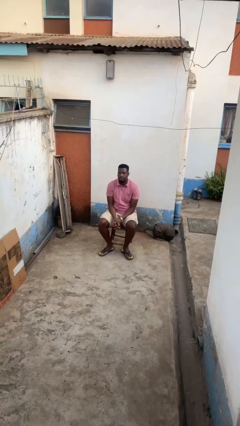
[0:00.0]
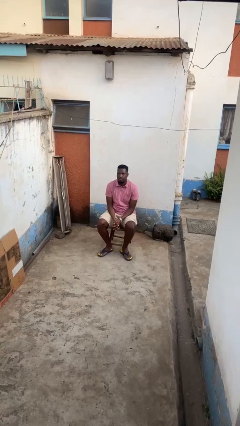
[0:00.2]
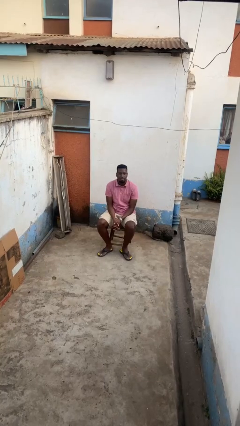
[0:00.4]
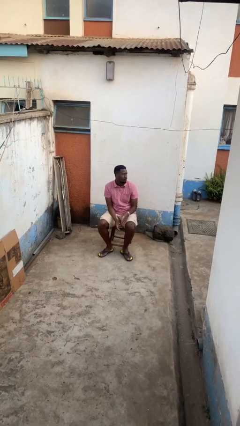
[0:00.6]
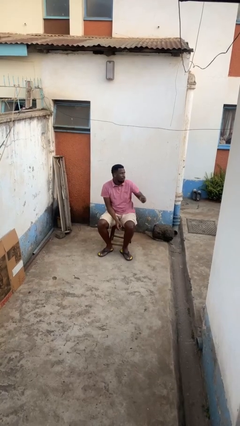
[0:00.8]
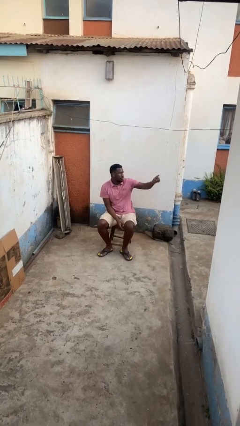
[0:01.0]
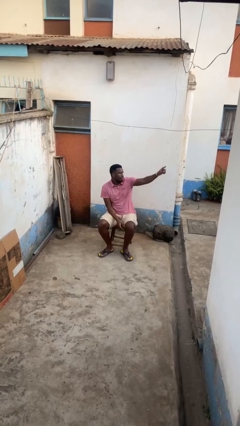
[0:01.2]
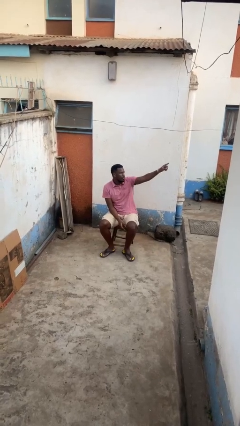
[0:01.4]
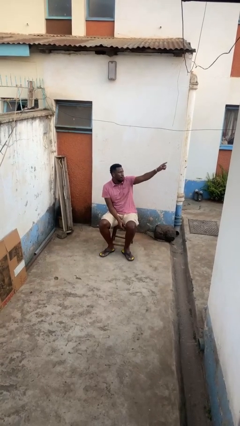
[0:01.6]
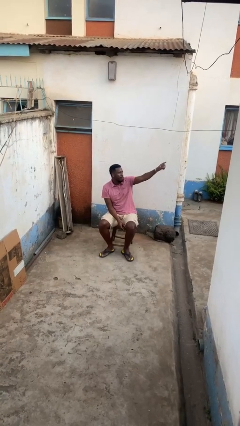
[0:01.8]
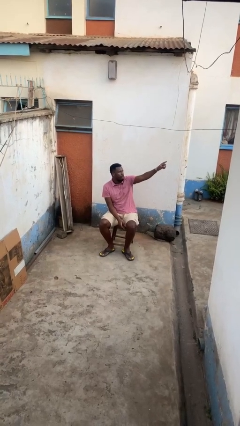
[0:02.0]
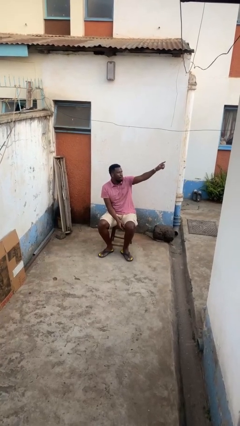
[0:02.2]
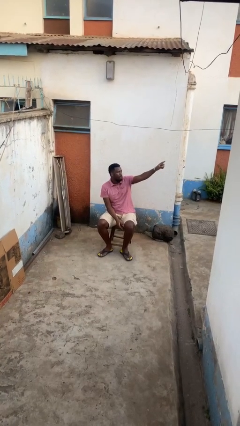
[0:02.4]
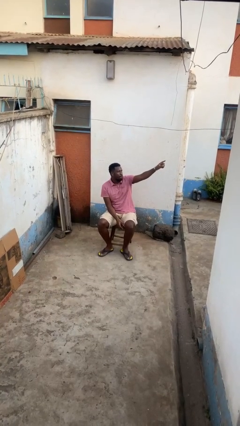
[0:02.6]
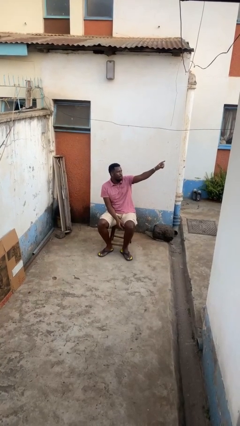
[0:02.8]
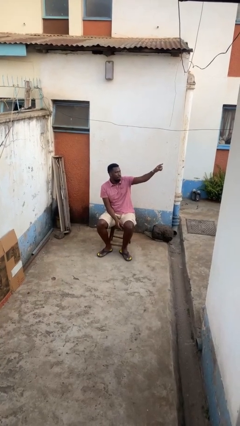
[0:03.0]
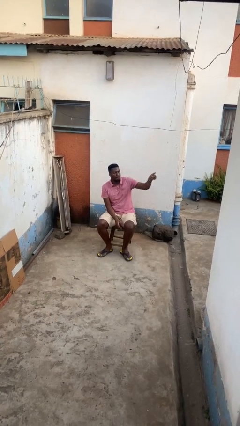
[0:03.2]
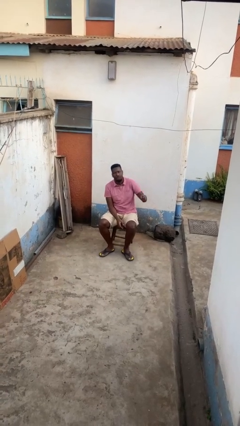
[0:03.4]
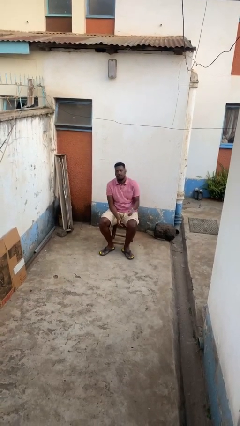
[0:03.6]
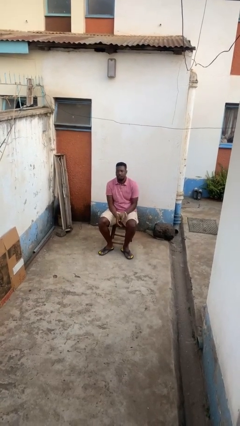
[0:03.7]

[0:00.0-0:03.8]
person points at person

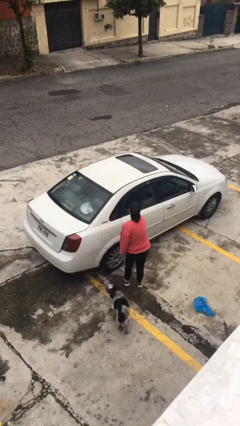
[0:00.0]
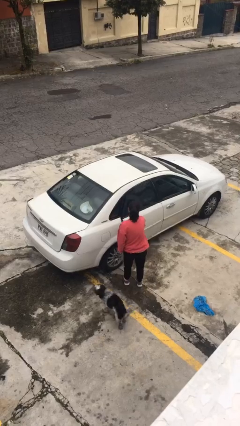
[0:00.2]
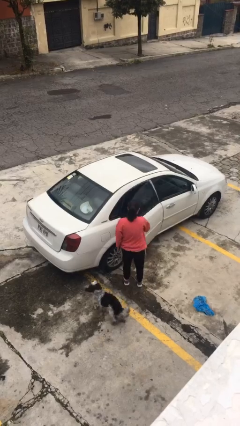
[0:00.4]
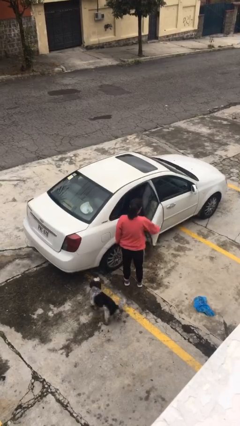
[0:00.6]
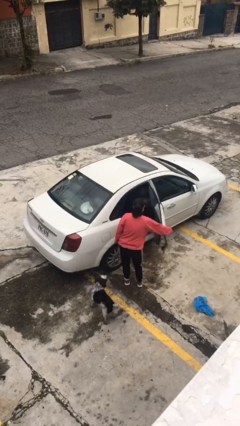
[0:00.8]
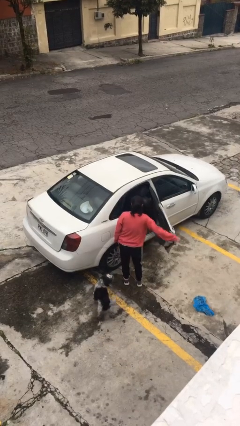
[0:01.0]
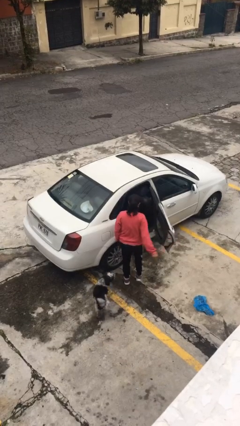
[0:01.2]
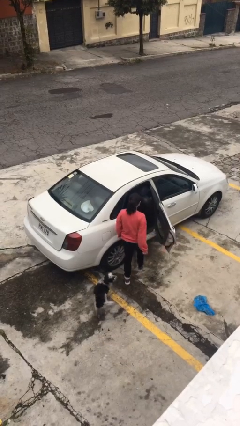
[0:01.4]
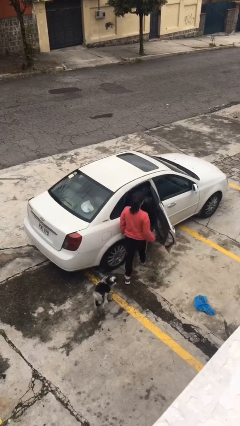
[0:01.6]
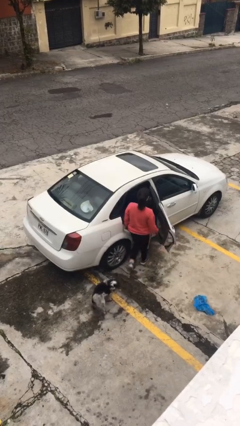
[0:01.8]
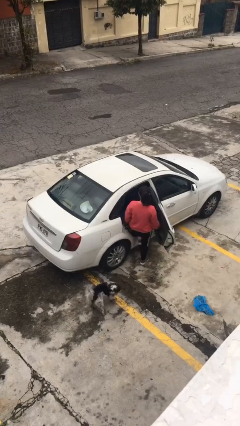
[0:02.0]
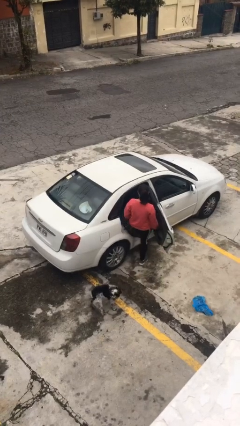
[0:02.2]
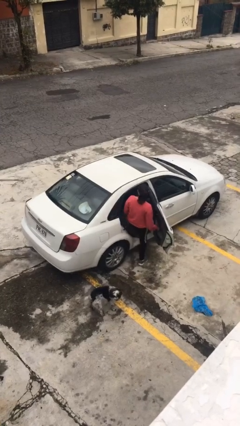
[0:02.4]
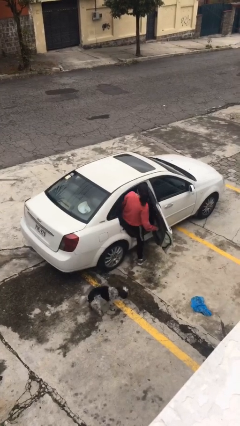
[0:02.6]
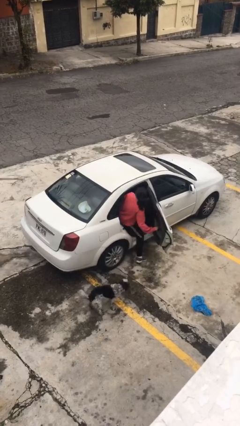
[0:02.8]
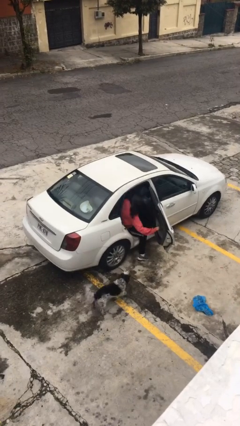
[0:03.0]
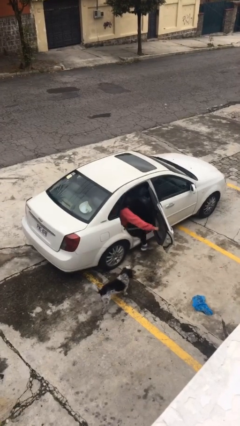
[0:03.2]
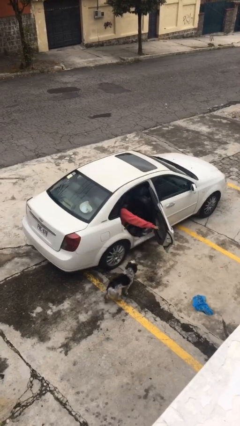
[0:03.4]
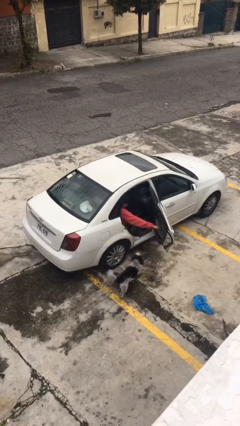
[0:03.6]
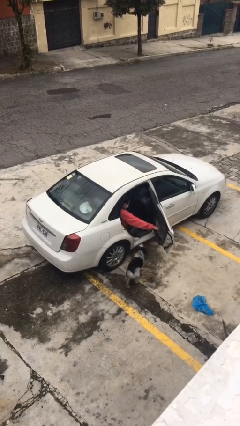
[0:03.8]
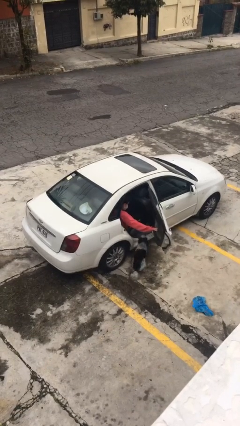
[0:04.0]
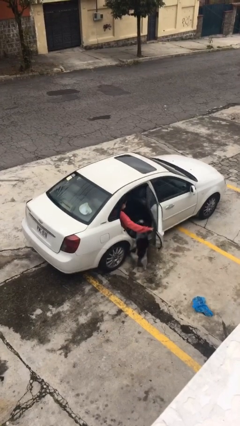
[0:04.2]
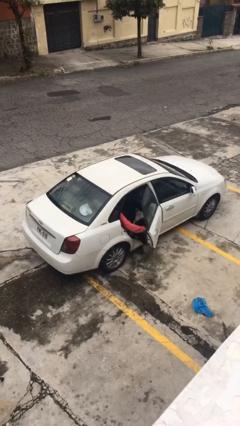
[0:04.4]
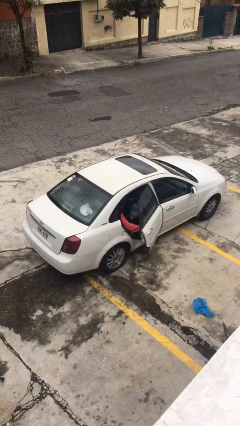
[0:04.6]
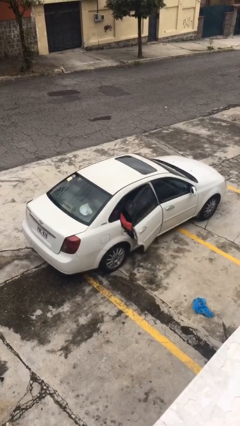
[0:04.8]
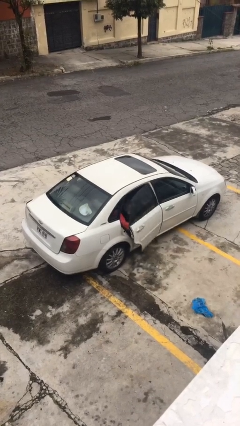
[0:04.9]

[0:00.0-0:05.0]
car picks up person

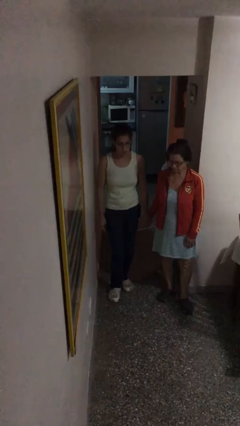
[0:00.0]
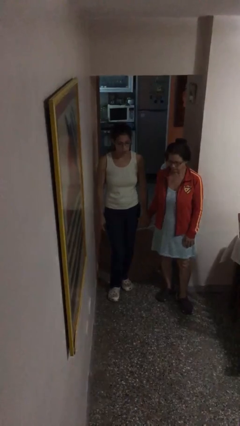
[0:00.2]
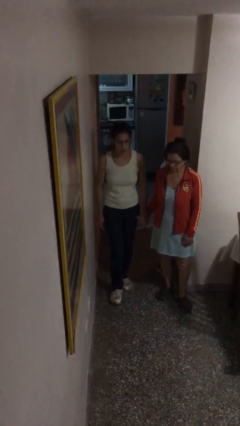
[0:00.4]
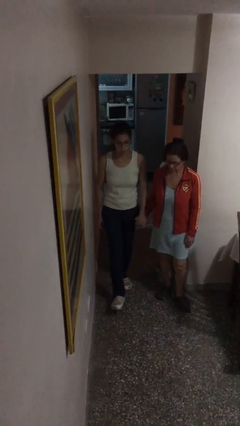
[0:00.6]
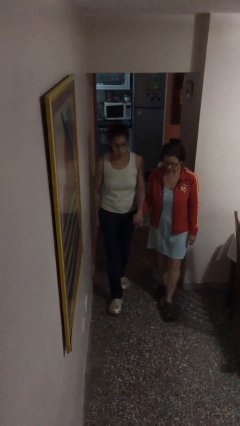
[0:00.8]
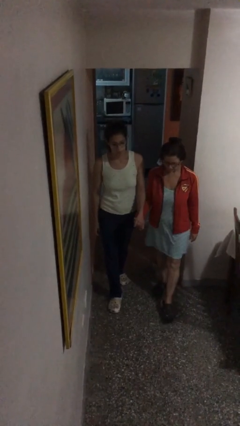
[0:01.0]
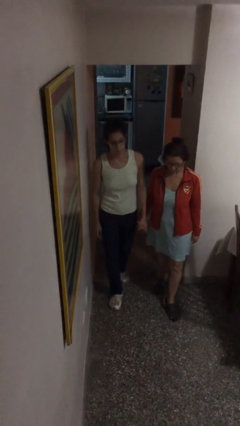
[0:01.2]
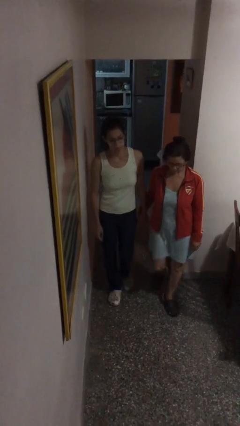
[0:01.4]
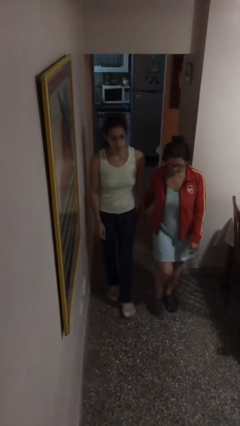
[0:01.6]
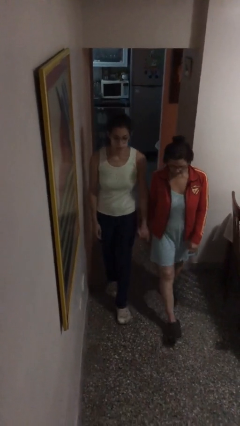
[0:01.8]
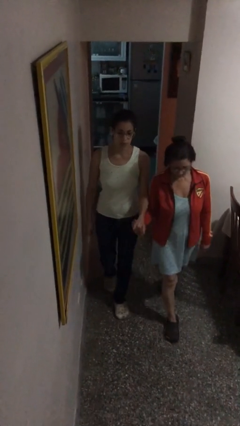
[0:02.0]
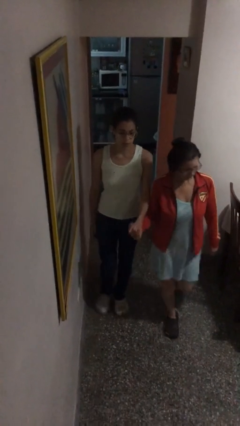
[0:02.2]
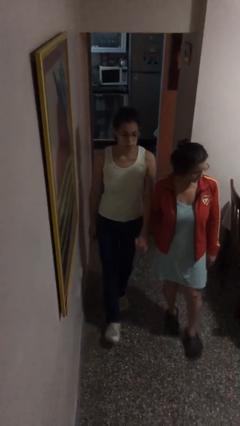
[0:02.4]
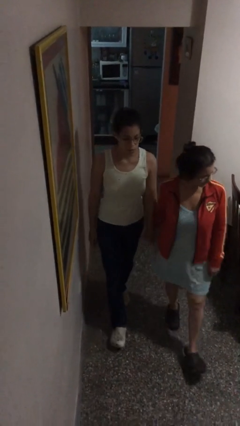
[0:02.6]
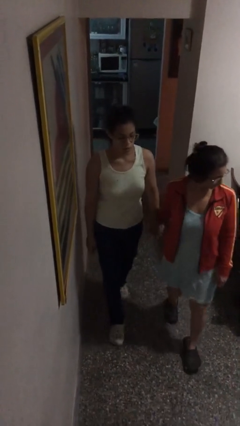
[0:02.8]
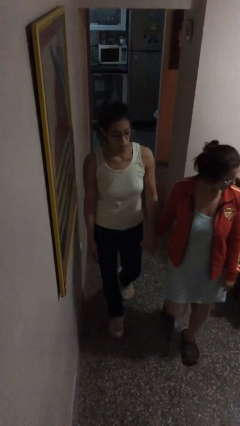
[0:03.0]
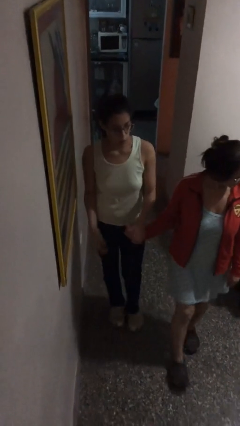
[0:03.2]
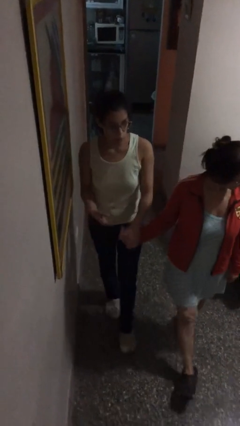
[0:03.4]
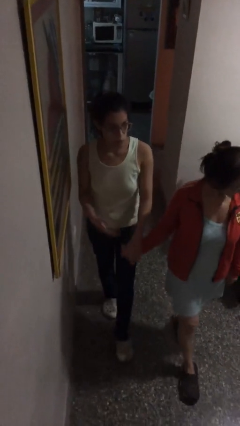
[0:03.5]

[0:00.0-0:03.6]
person holds hand

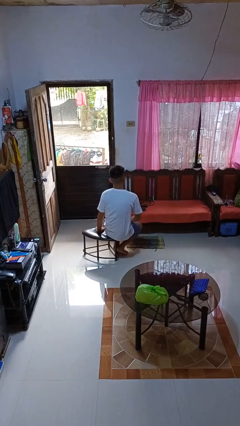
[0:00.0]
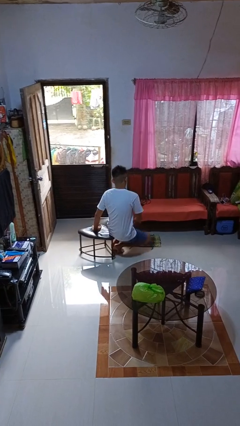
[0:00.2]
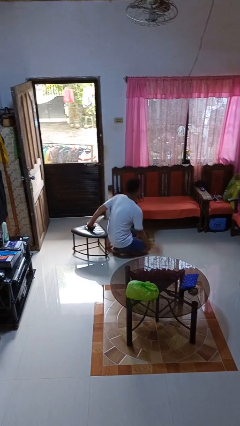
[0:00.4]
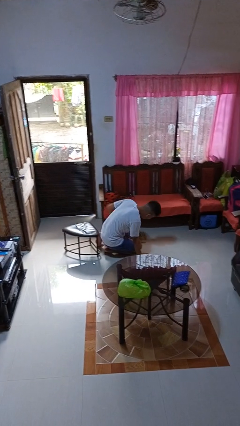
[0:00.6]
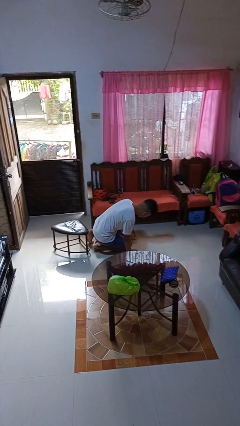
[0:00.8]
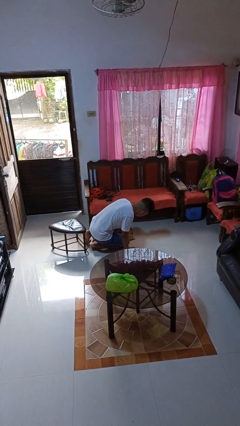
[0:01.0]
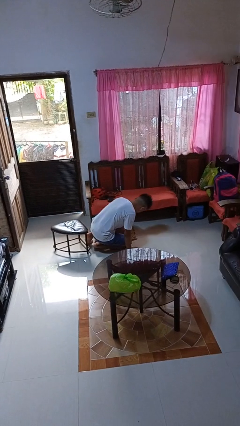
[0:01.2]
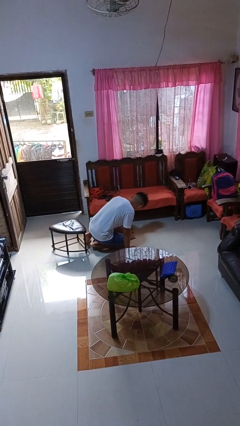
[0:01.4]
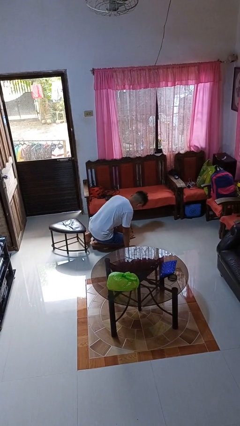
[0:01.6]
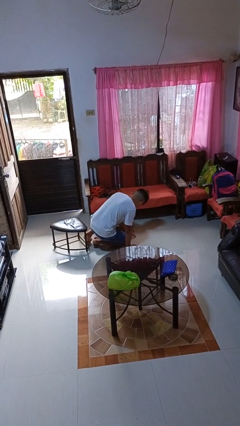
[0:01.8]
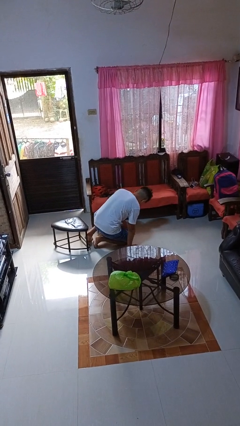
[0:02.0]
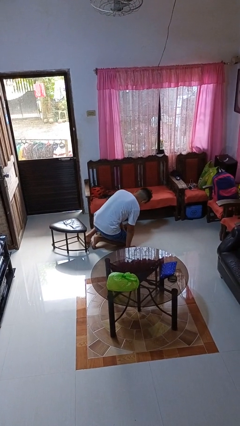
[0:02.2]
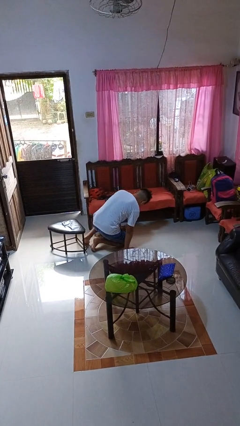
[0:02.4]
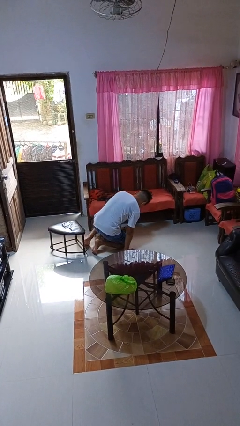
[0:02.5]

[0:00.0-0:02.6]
person falls from chair

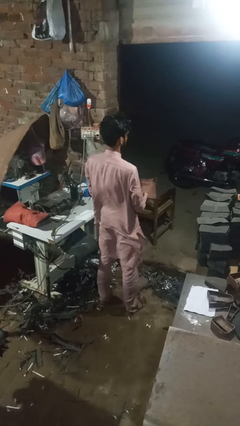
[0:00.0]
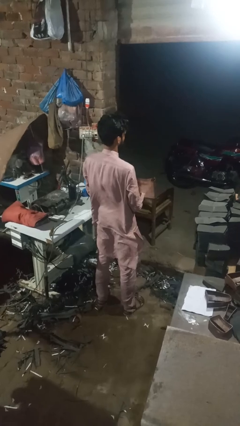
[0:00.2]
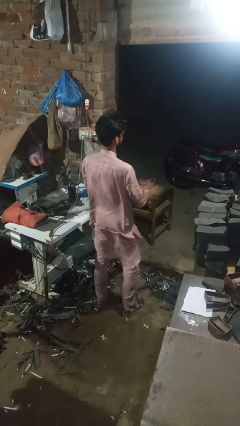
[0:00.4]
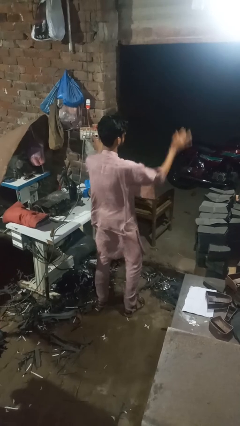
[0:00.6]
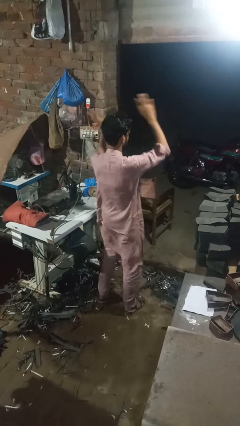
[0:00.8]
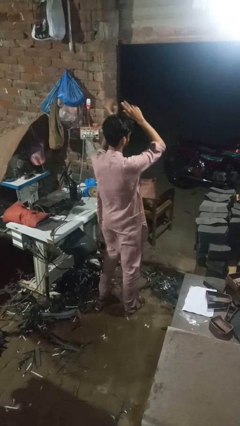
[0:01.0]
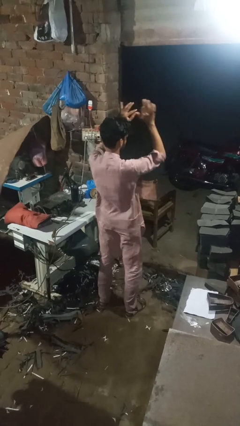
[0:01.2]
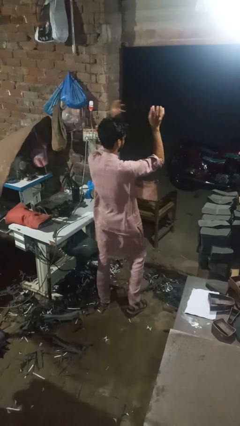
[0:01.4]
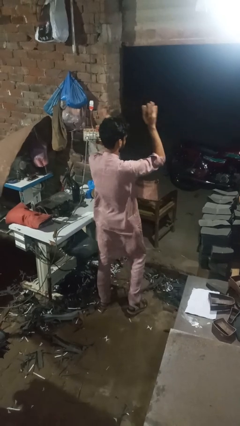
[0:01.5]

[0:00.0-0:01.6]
person dances in place

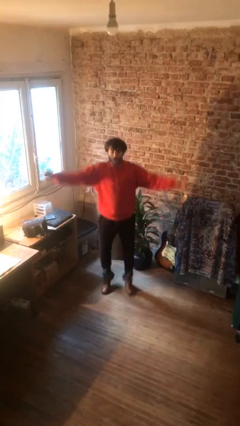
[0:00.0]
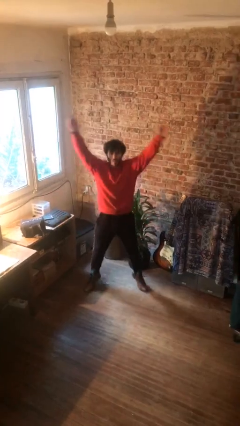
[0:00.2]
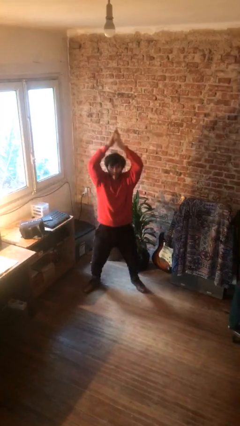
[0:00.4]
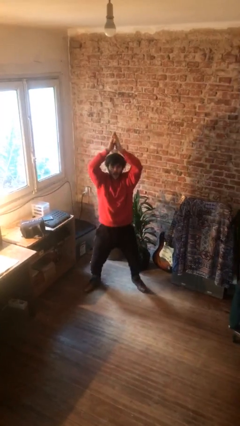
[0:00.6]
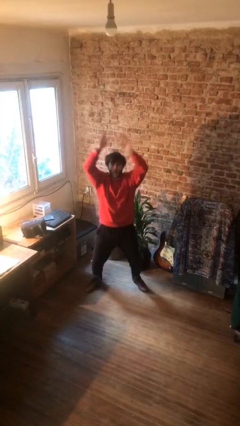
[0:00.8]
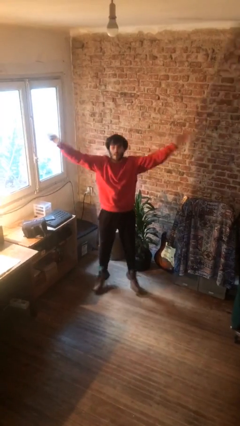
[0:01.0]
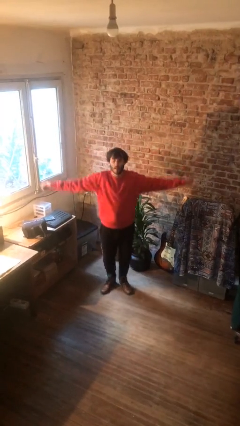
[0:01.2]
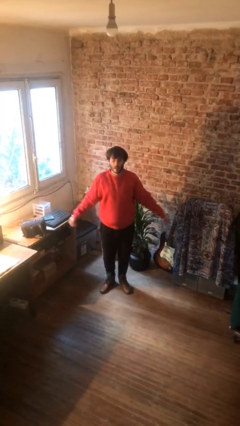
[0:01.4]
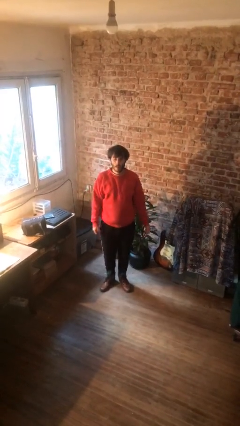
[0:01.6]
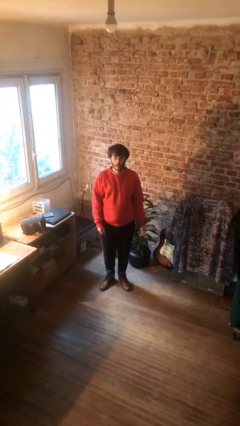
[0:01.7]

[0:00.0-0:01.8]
person exercises with jumping jacks
